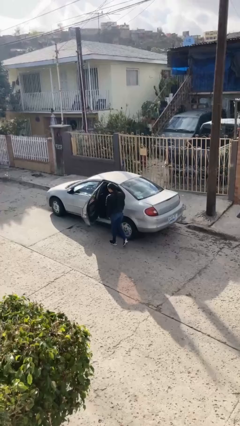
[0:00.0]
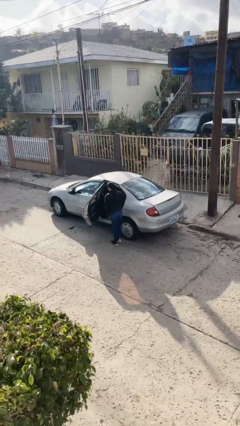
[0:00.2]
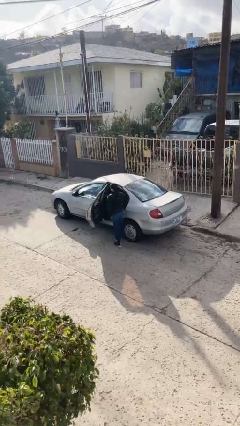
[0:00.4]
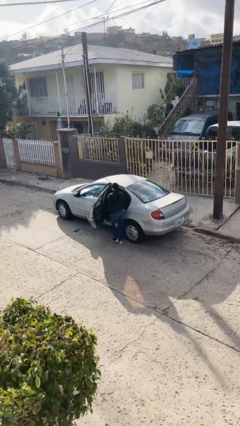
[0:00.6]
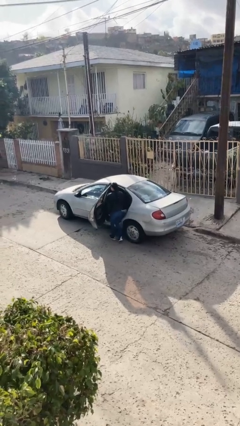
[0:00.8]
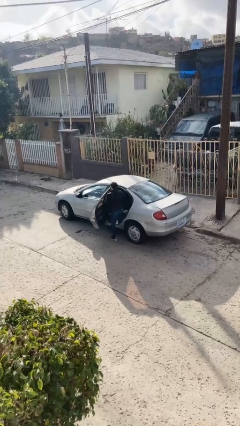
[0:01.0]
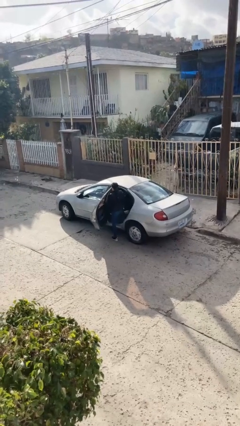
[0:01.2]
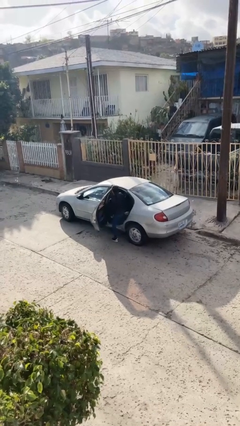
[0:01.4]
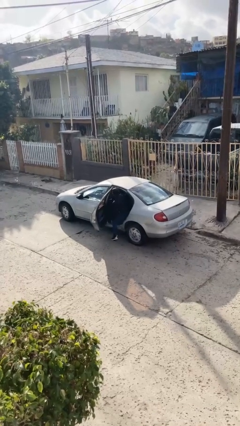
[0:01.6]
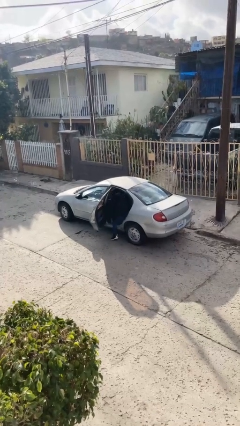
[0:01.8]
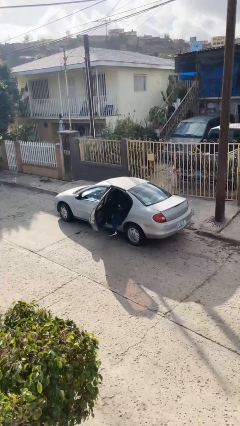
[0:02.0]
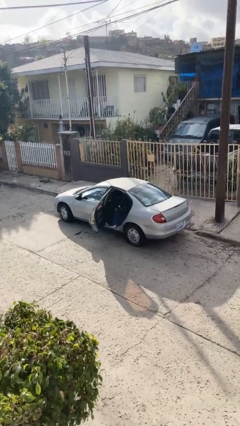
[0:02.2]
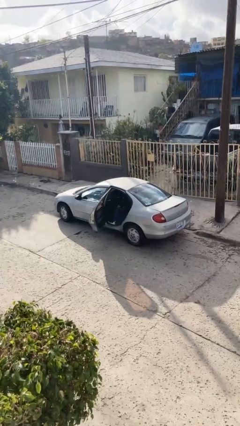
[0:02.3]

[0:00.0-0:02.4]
person enters car

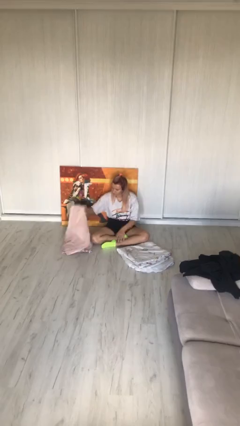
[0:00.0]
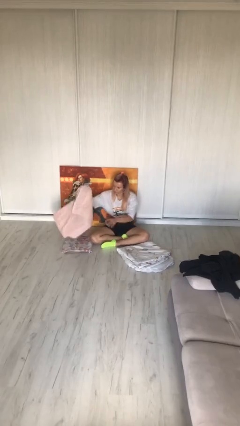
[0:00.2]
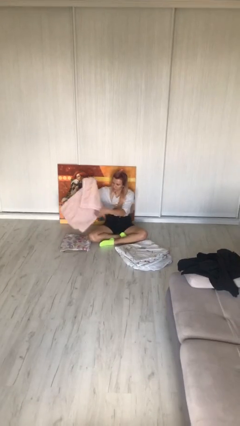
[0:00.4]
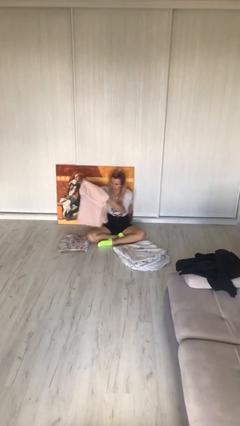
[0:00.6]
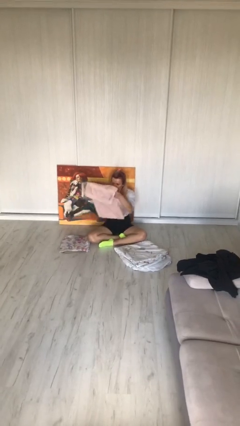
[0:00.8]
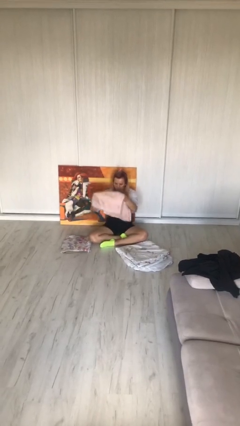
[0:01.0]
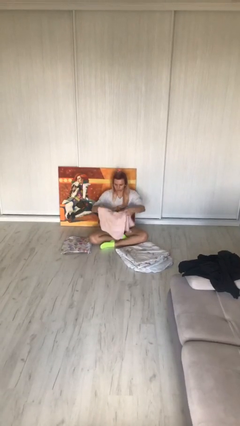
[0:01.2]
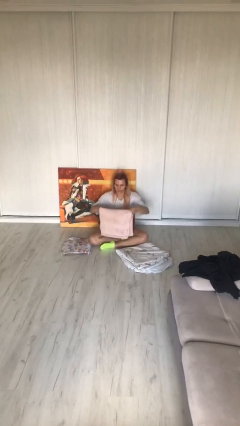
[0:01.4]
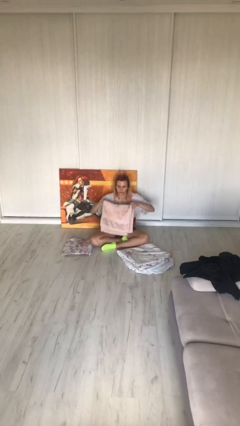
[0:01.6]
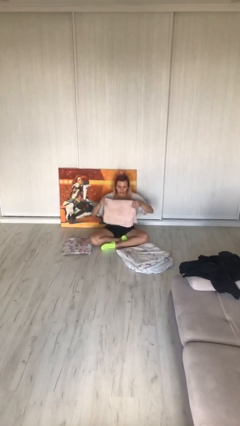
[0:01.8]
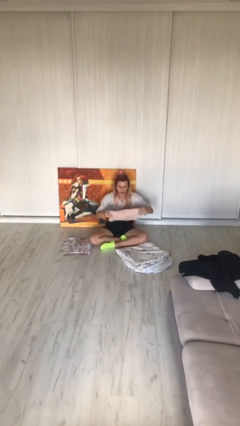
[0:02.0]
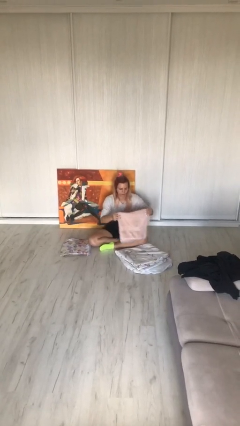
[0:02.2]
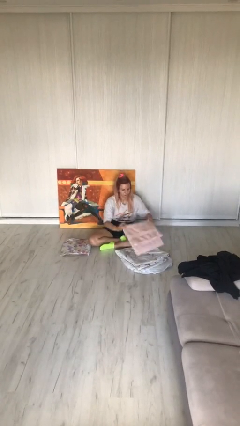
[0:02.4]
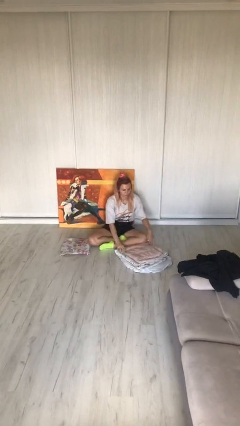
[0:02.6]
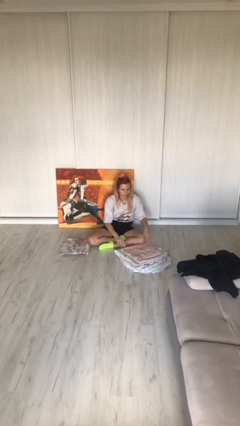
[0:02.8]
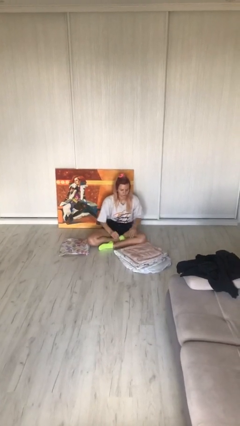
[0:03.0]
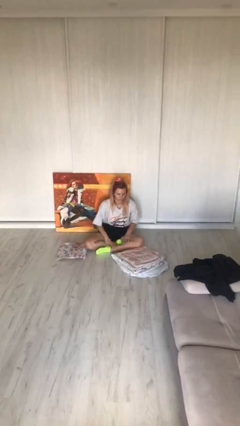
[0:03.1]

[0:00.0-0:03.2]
person folds towel

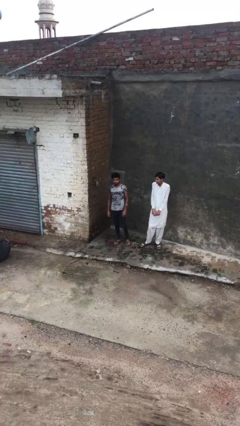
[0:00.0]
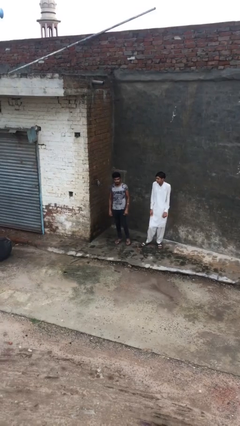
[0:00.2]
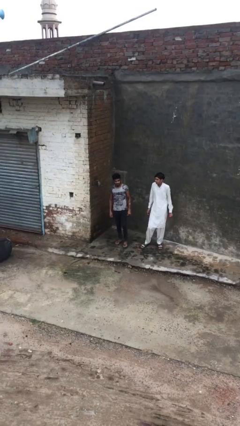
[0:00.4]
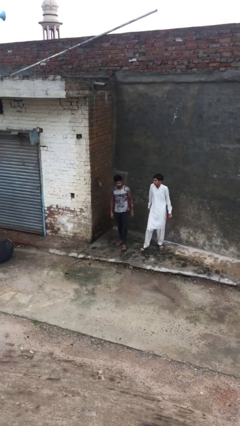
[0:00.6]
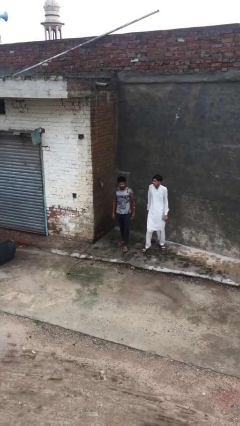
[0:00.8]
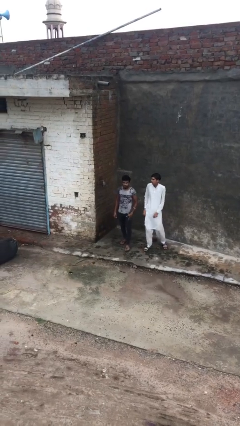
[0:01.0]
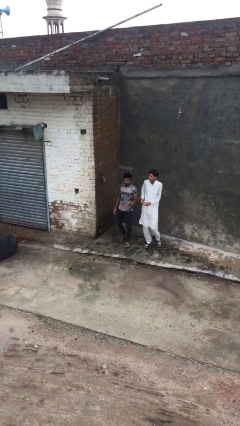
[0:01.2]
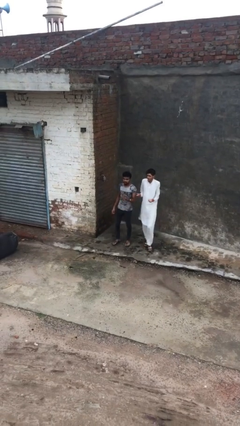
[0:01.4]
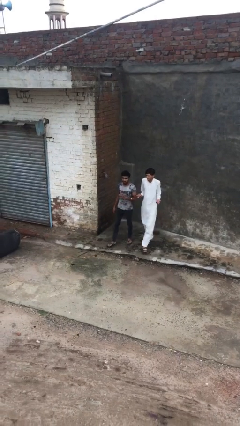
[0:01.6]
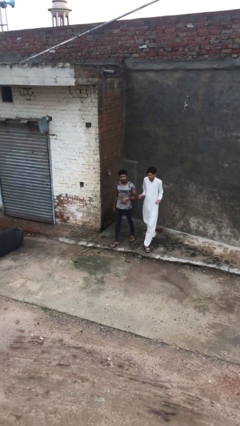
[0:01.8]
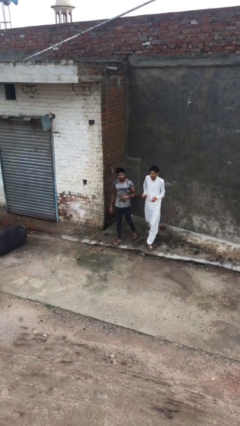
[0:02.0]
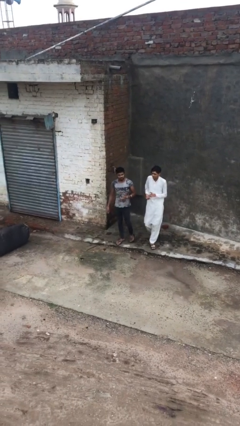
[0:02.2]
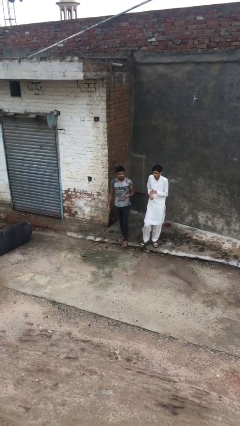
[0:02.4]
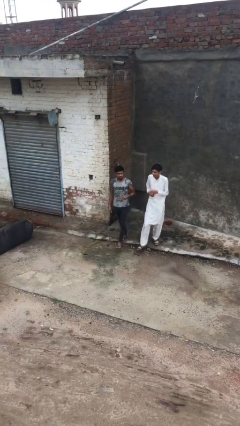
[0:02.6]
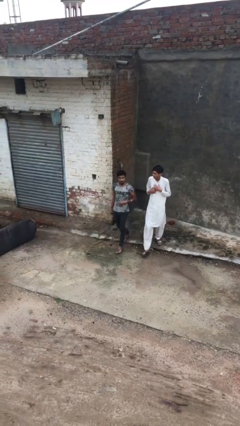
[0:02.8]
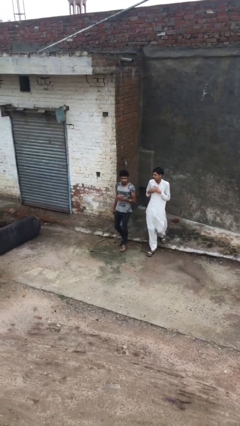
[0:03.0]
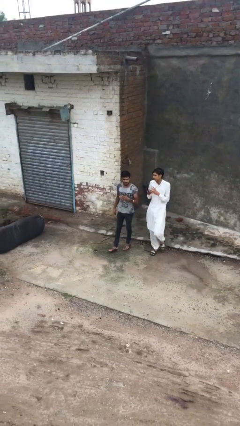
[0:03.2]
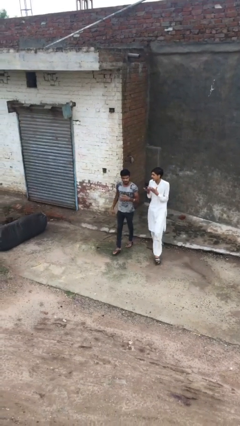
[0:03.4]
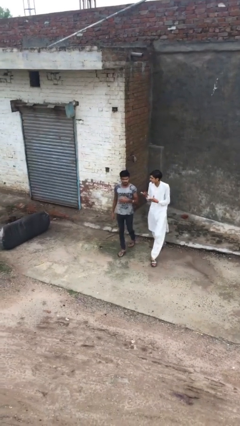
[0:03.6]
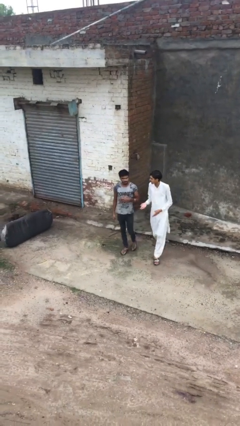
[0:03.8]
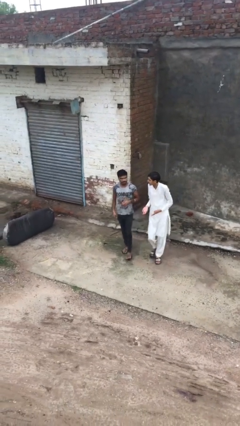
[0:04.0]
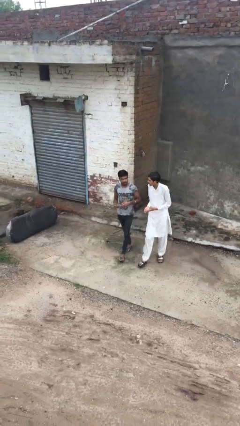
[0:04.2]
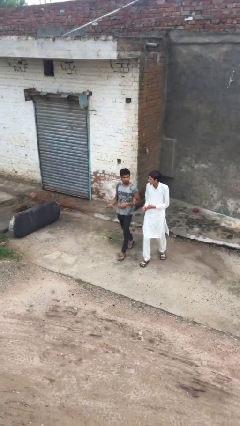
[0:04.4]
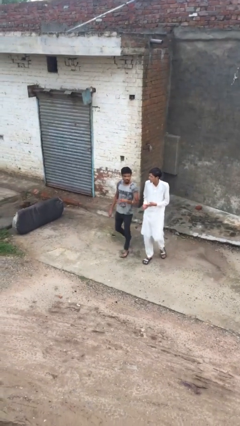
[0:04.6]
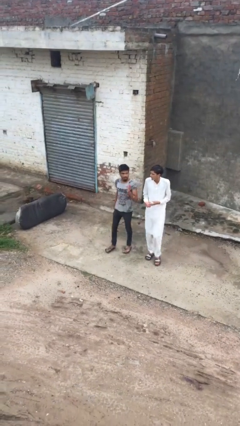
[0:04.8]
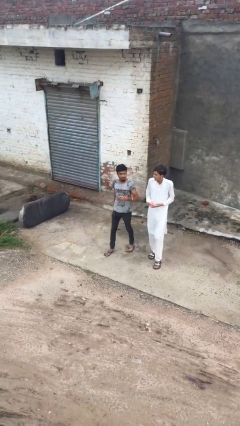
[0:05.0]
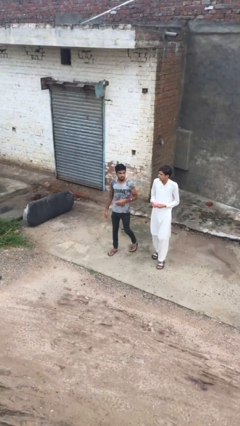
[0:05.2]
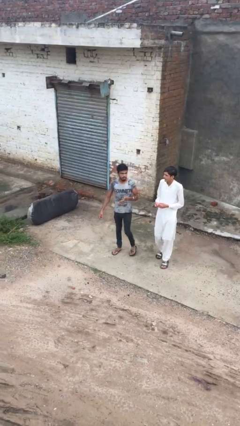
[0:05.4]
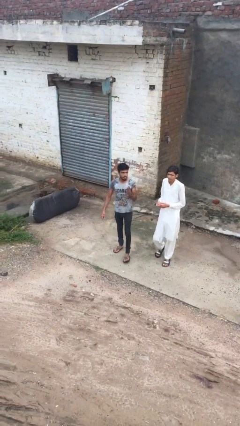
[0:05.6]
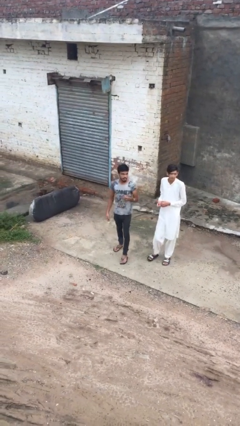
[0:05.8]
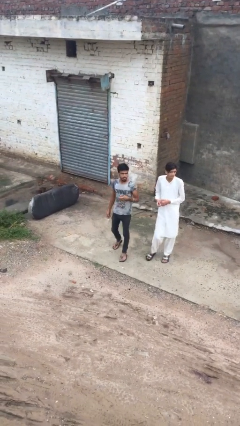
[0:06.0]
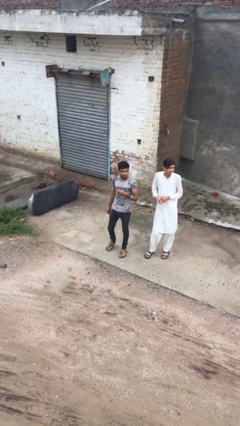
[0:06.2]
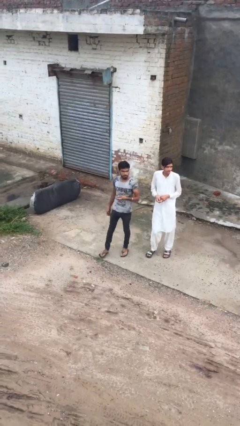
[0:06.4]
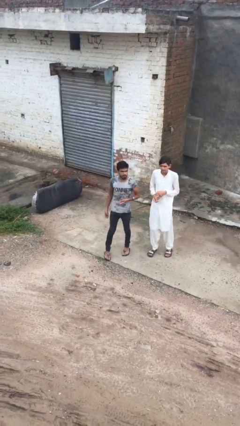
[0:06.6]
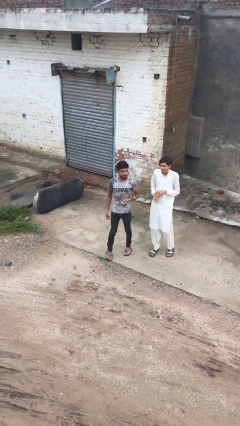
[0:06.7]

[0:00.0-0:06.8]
person talks to person

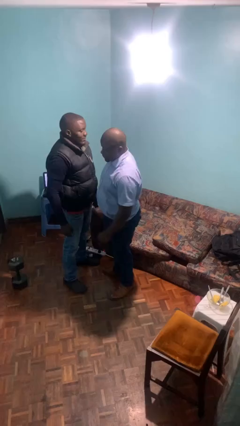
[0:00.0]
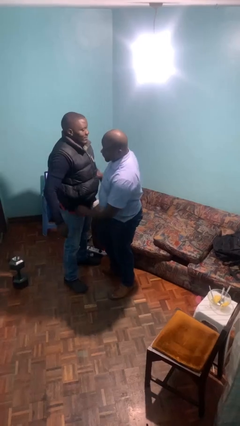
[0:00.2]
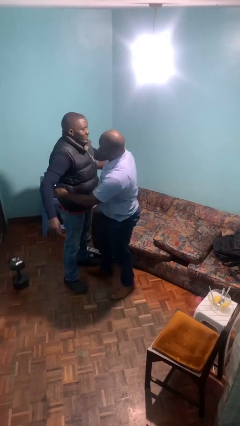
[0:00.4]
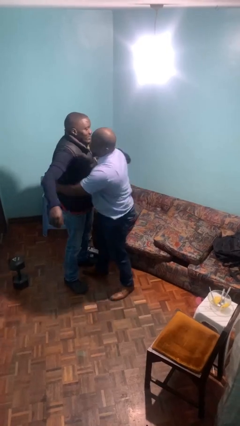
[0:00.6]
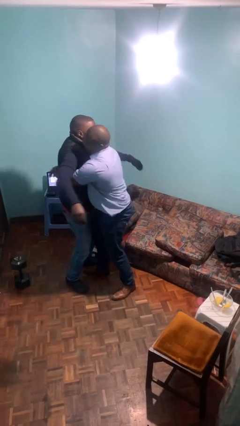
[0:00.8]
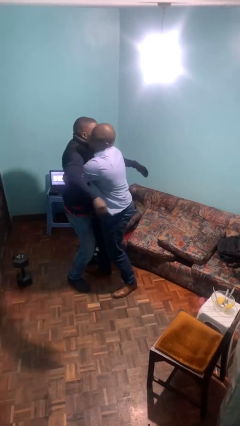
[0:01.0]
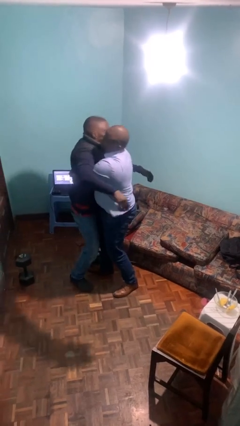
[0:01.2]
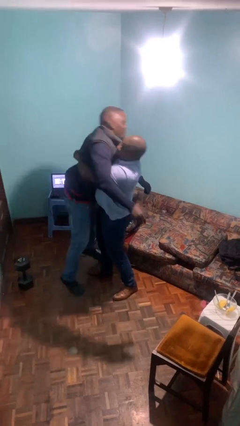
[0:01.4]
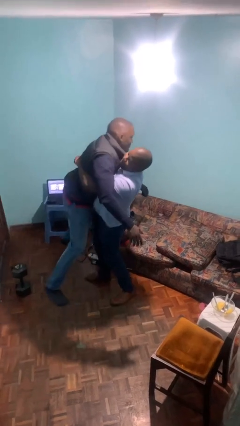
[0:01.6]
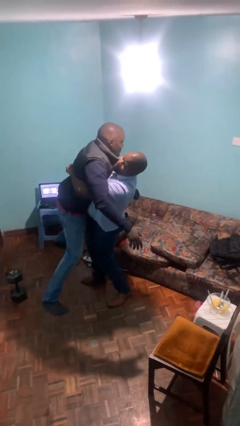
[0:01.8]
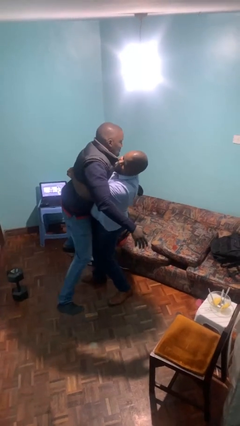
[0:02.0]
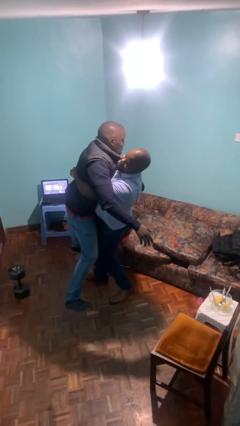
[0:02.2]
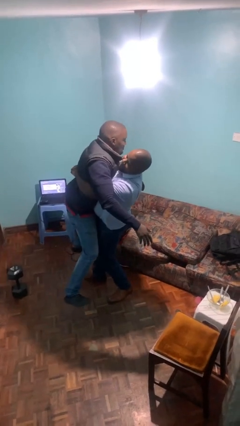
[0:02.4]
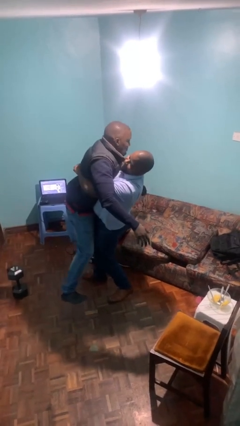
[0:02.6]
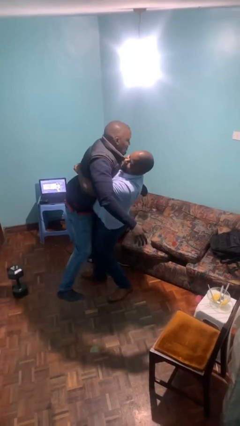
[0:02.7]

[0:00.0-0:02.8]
person picks up person

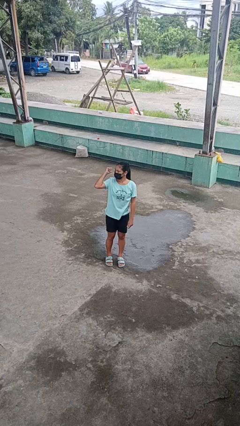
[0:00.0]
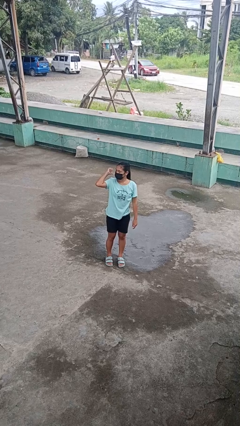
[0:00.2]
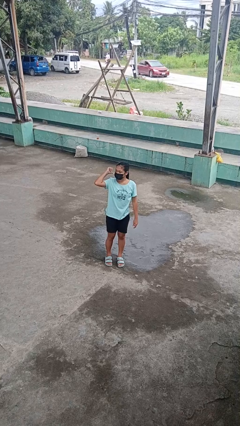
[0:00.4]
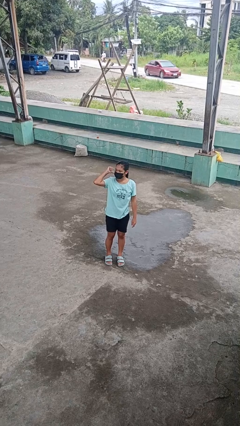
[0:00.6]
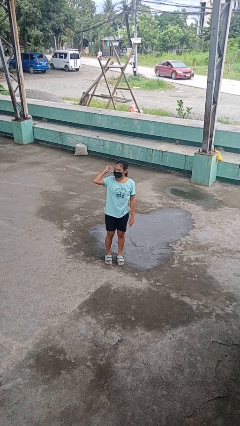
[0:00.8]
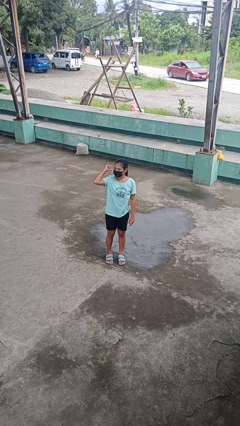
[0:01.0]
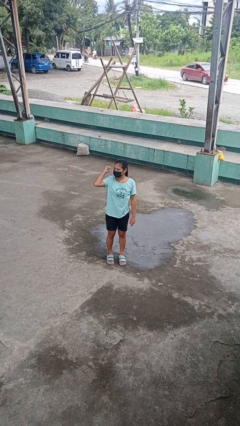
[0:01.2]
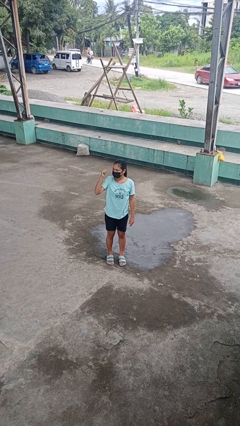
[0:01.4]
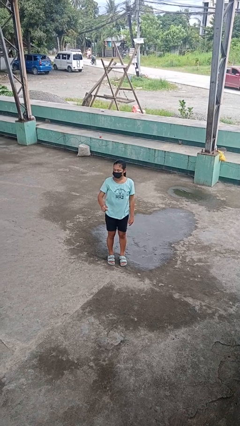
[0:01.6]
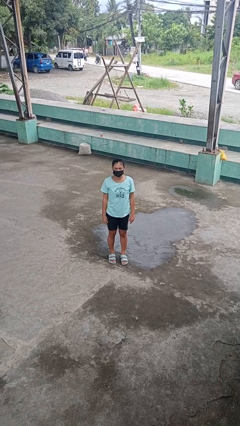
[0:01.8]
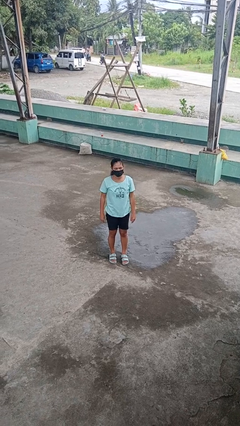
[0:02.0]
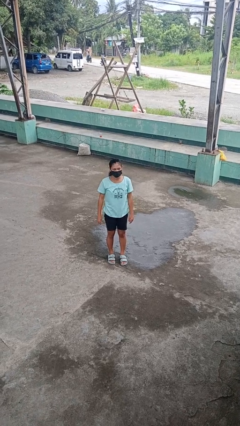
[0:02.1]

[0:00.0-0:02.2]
person gestures behind me
